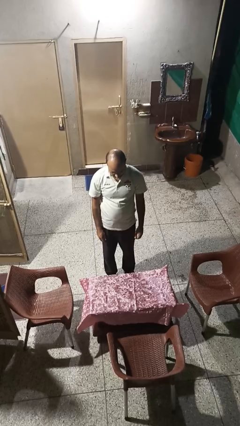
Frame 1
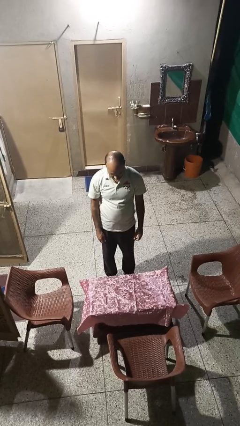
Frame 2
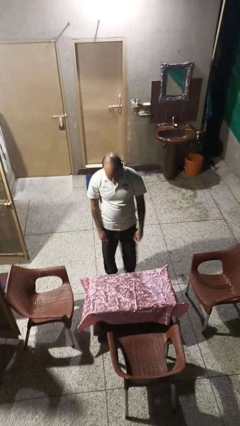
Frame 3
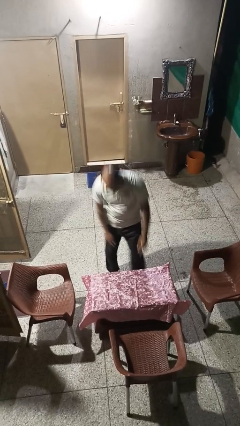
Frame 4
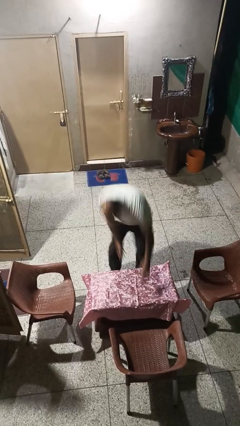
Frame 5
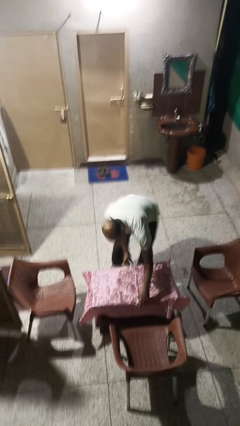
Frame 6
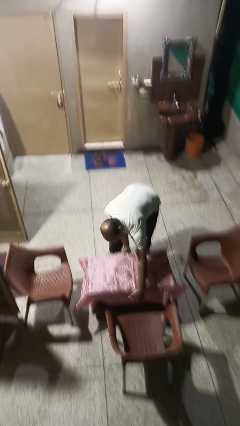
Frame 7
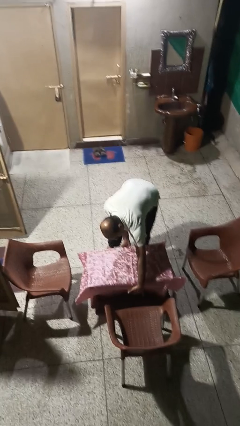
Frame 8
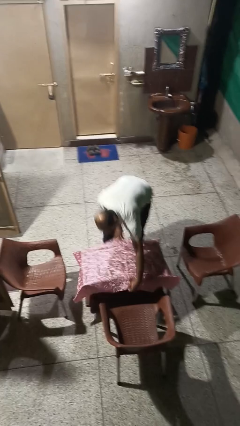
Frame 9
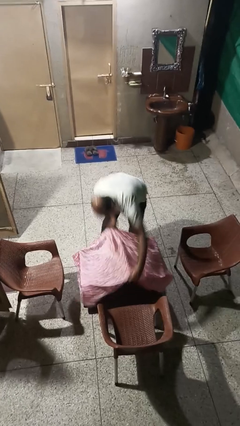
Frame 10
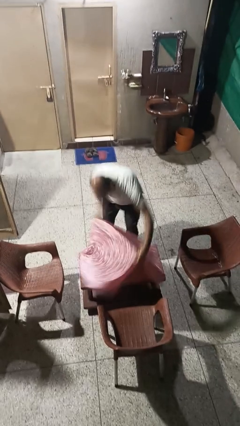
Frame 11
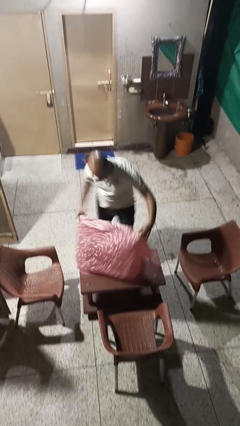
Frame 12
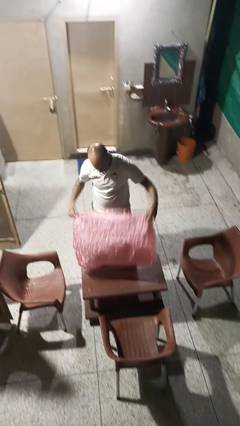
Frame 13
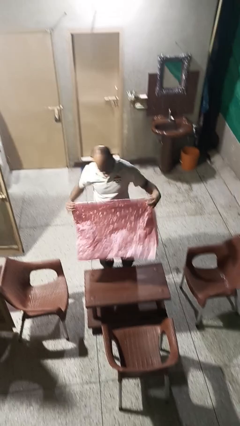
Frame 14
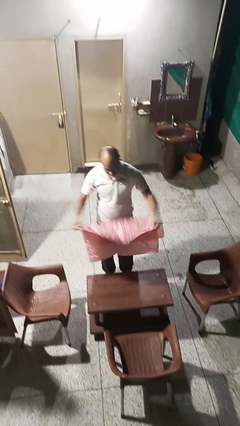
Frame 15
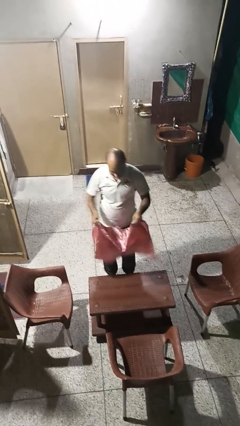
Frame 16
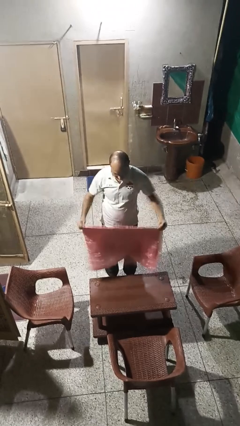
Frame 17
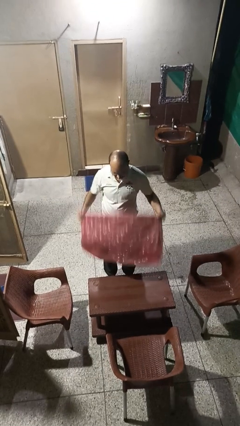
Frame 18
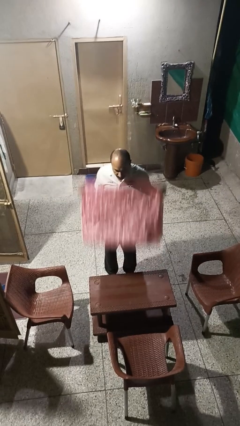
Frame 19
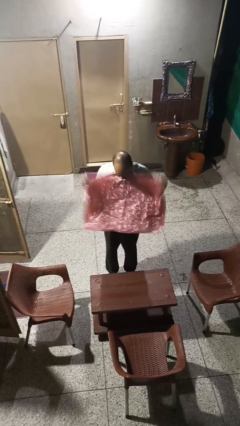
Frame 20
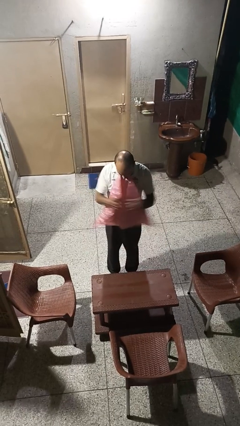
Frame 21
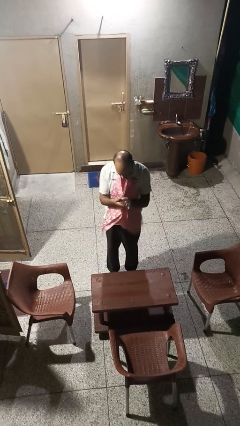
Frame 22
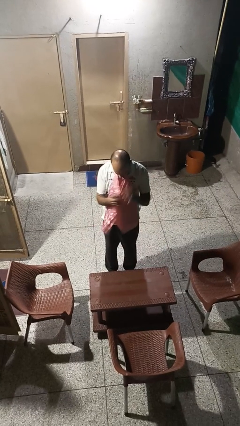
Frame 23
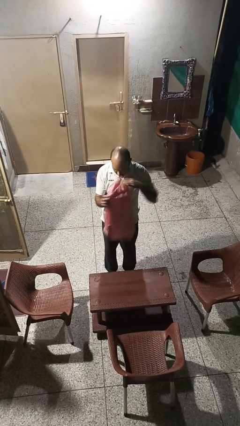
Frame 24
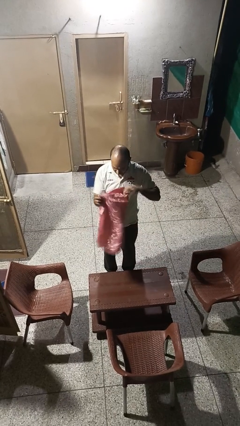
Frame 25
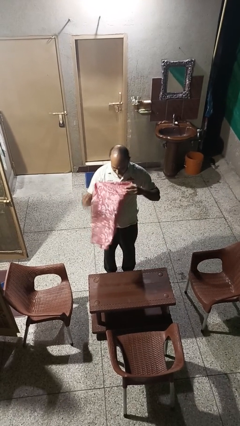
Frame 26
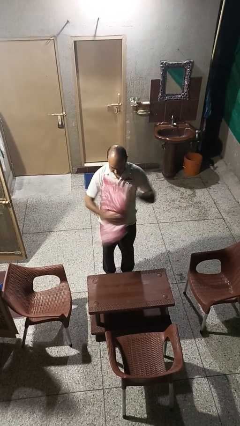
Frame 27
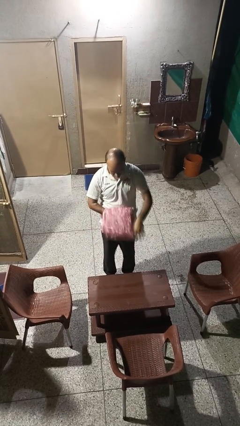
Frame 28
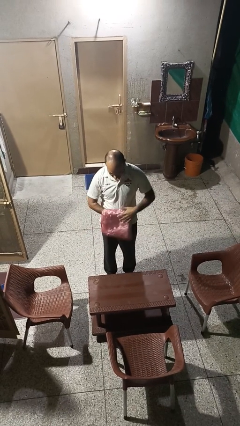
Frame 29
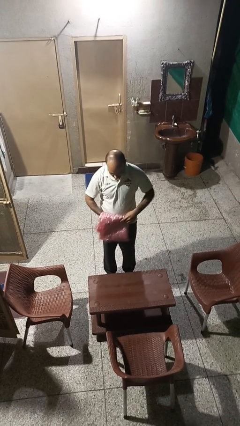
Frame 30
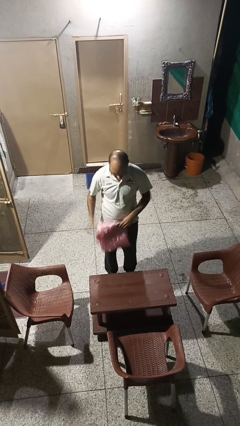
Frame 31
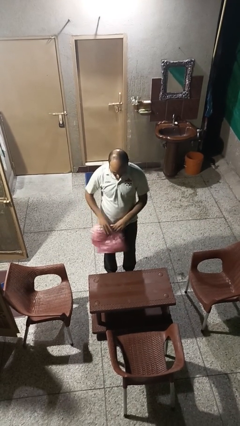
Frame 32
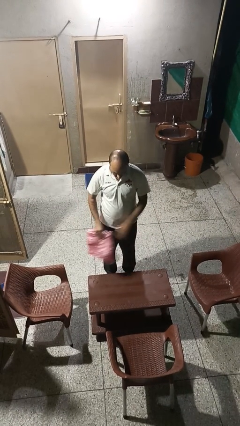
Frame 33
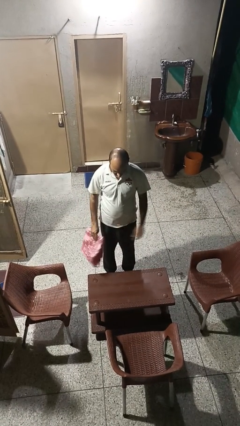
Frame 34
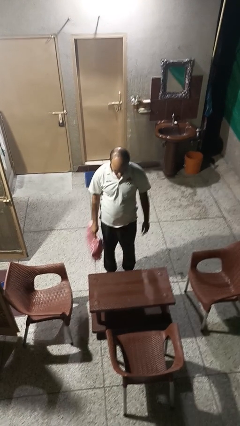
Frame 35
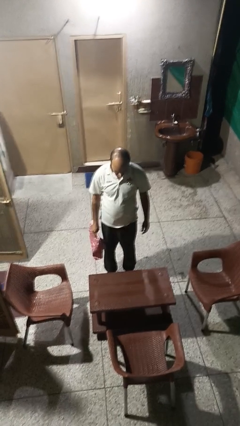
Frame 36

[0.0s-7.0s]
person folds tablecloth

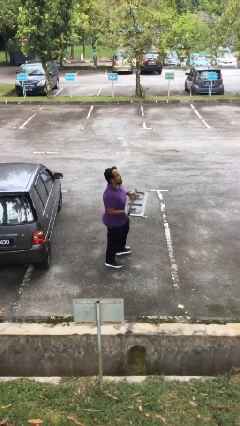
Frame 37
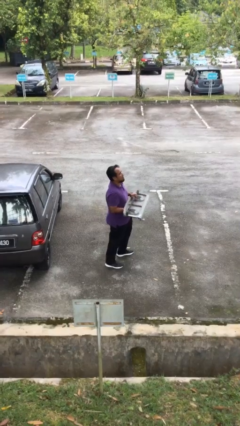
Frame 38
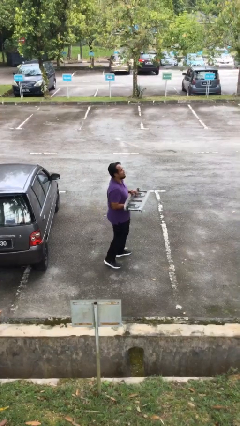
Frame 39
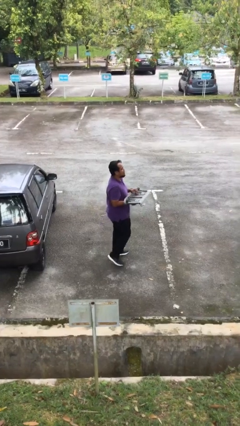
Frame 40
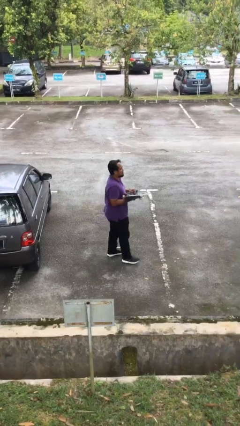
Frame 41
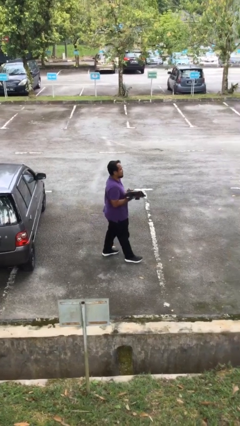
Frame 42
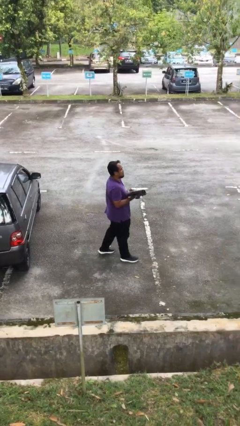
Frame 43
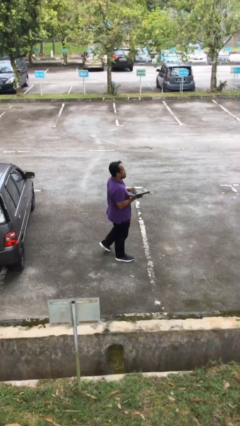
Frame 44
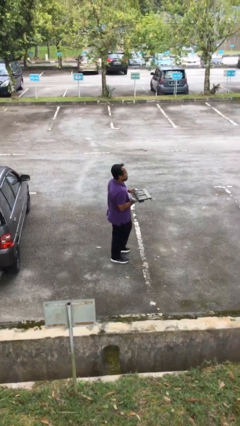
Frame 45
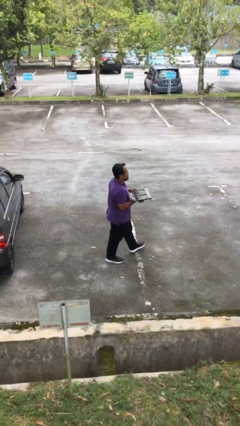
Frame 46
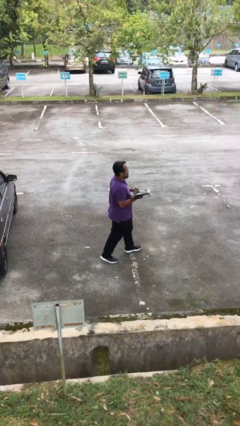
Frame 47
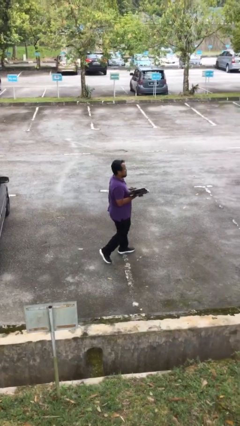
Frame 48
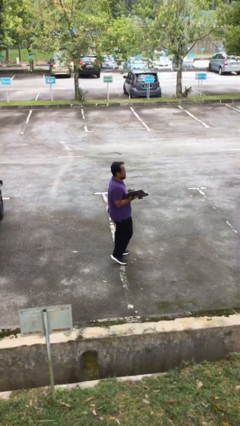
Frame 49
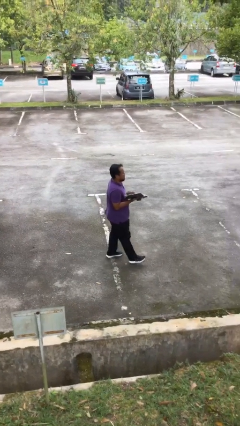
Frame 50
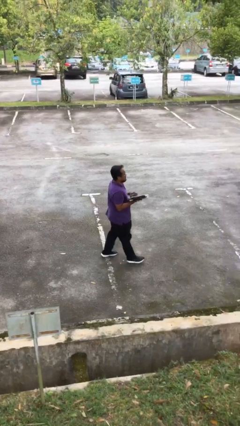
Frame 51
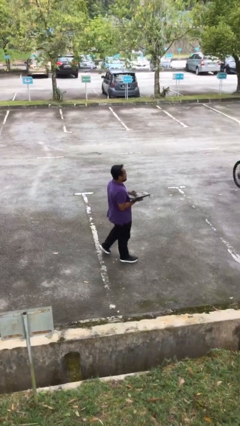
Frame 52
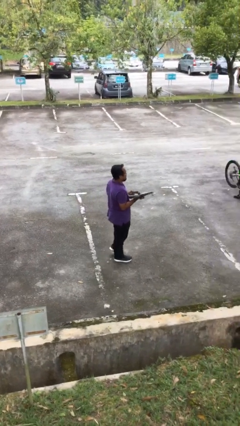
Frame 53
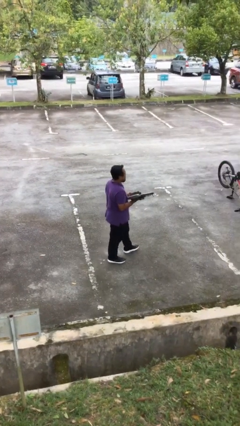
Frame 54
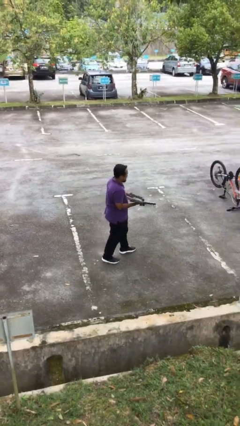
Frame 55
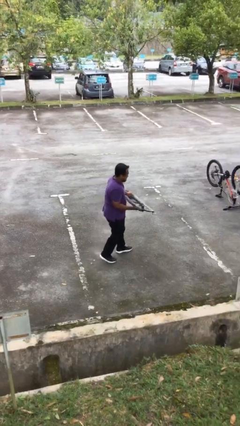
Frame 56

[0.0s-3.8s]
person carries heavy object

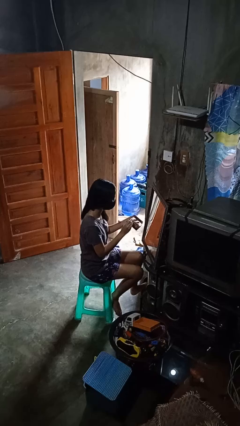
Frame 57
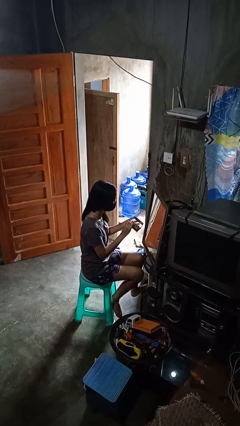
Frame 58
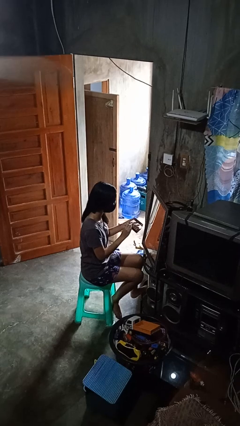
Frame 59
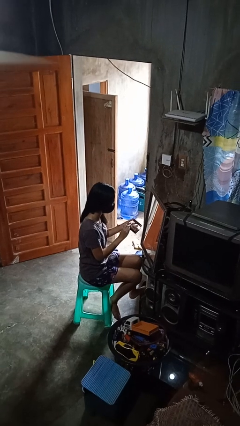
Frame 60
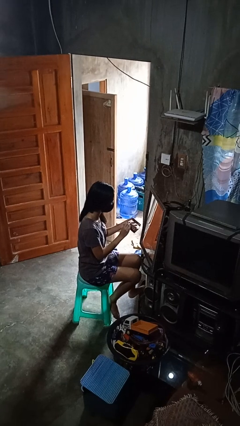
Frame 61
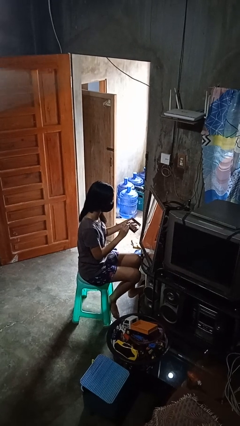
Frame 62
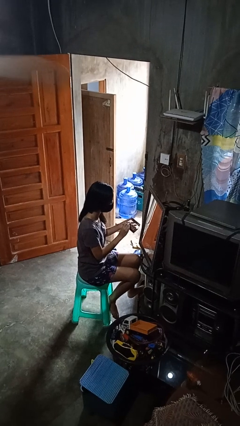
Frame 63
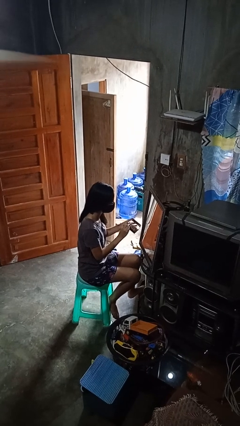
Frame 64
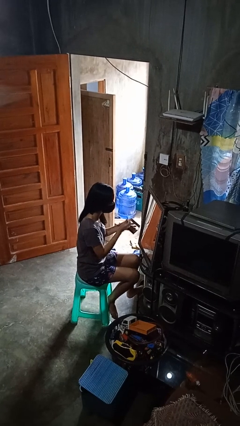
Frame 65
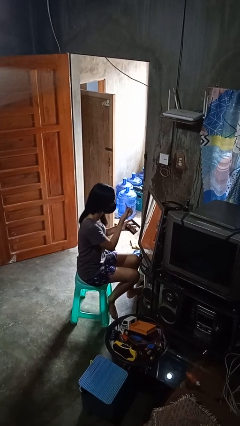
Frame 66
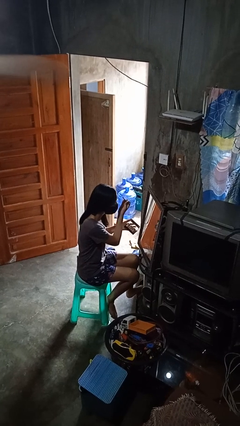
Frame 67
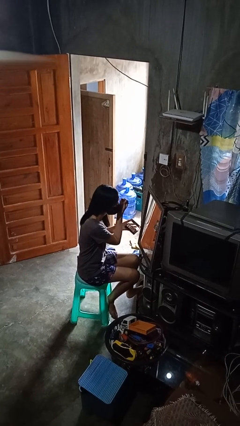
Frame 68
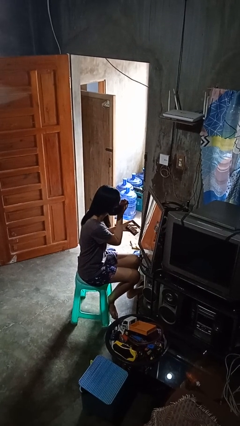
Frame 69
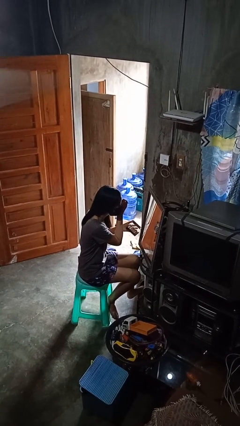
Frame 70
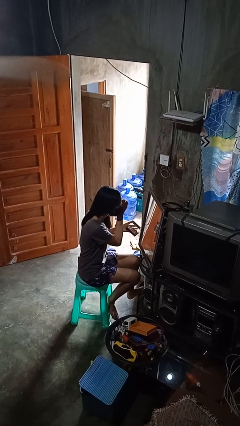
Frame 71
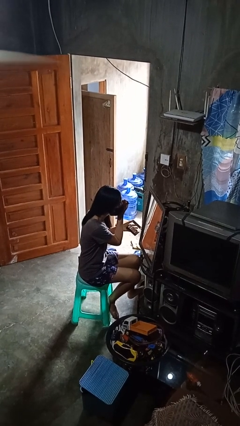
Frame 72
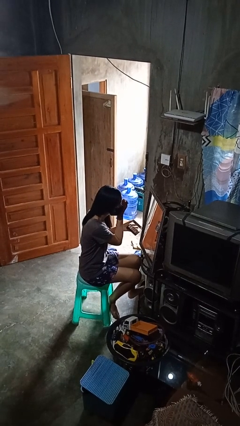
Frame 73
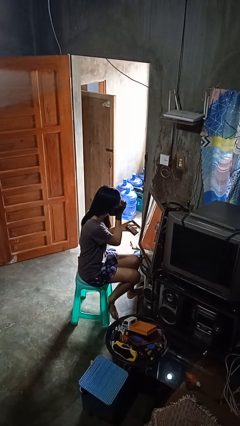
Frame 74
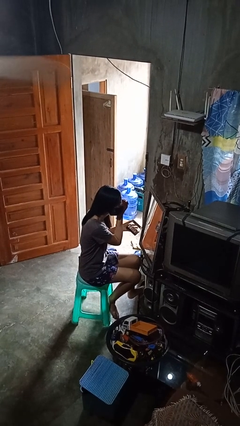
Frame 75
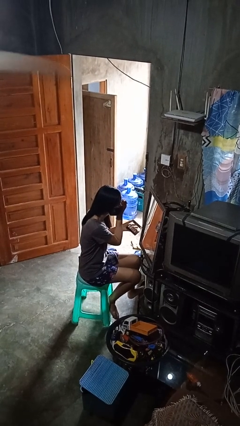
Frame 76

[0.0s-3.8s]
person applies eye makeup

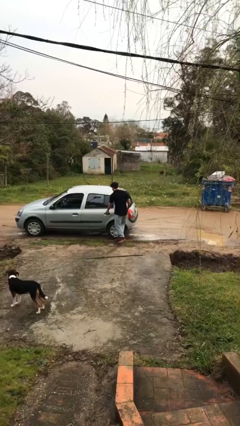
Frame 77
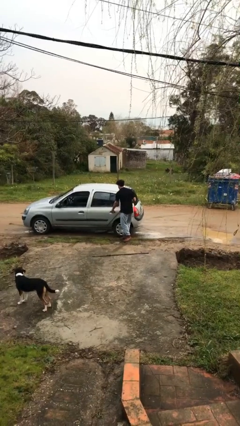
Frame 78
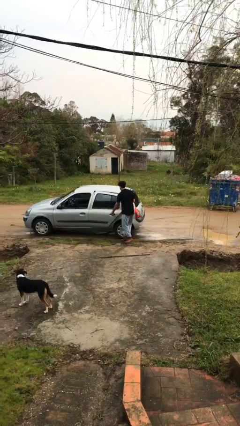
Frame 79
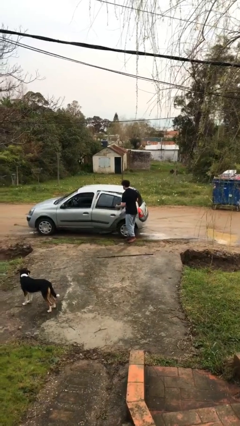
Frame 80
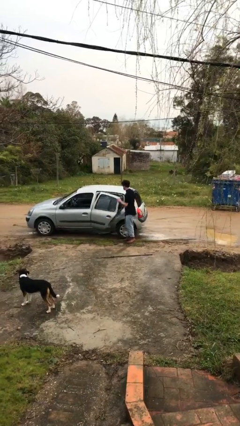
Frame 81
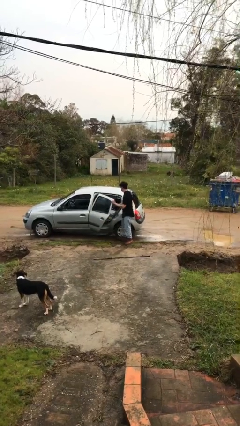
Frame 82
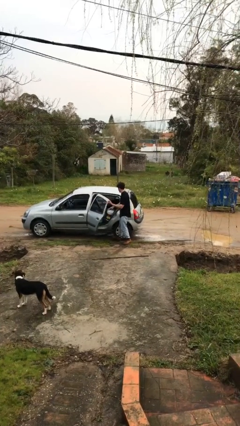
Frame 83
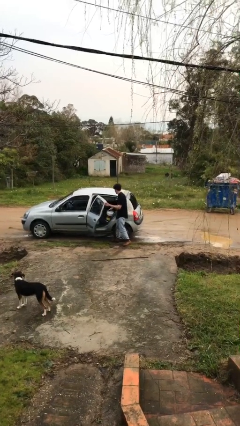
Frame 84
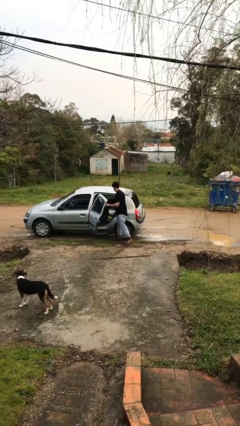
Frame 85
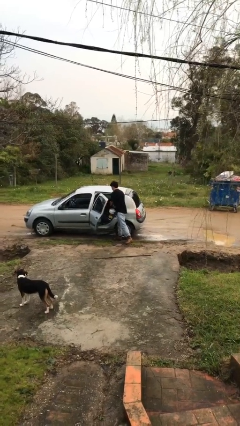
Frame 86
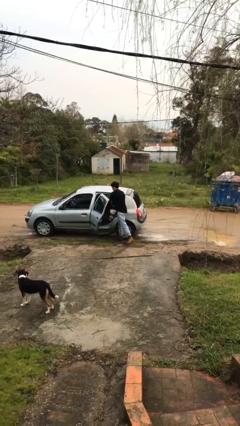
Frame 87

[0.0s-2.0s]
person opens car door

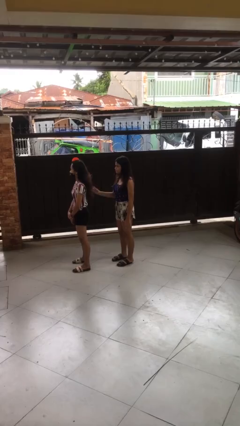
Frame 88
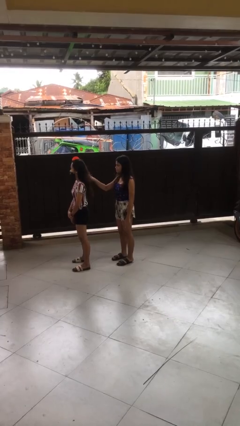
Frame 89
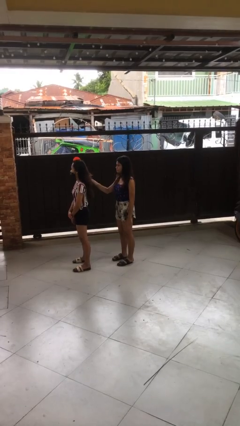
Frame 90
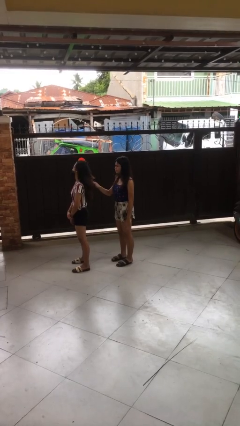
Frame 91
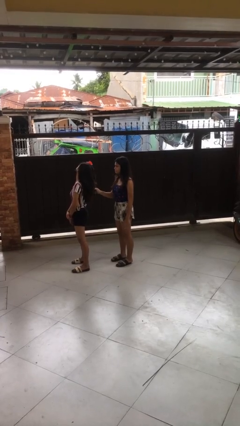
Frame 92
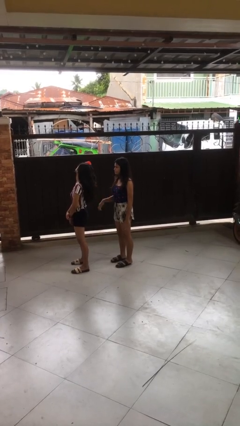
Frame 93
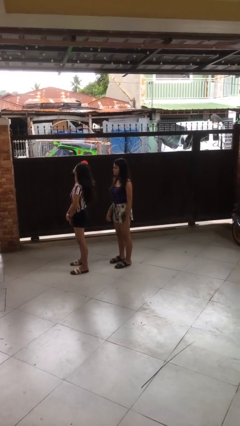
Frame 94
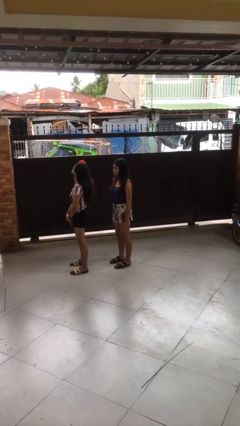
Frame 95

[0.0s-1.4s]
person grabs person by hair
